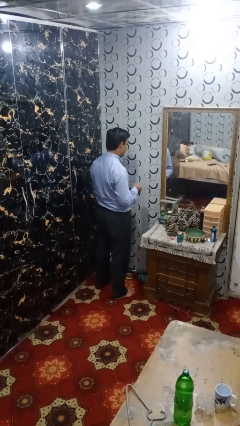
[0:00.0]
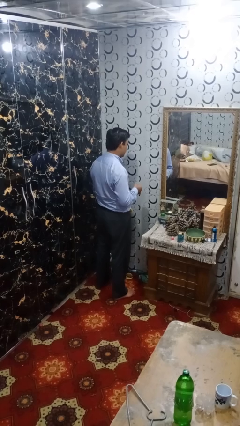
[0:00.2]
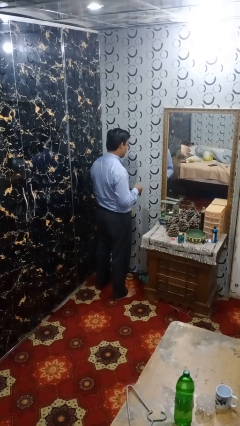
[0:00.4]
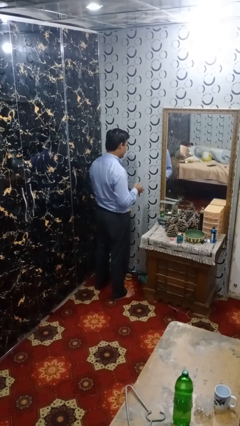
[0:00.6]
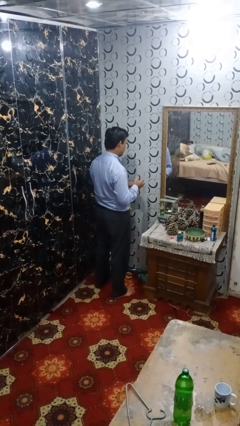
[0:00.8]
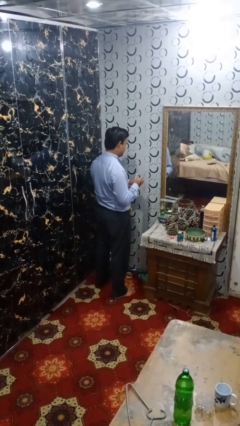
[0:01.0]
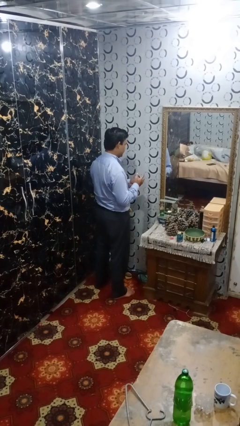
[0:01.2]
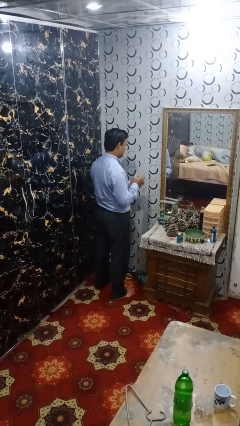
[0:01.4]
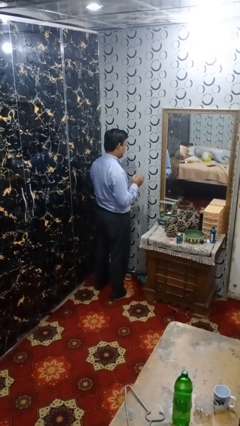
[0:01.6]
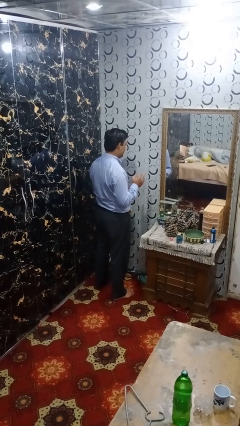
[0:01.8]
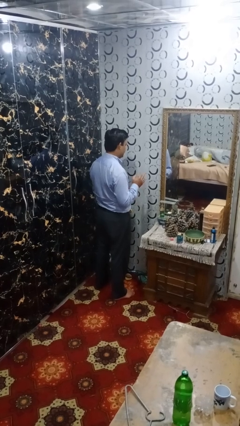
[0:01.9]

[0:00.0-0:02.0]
person puts on ring

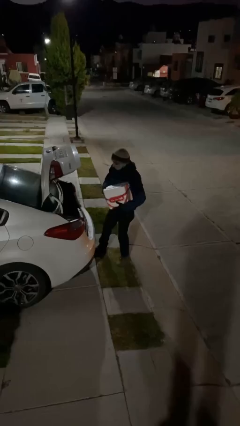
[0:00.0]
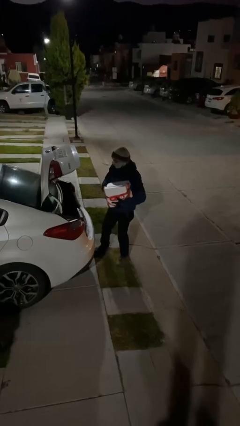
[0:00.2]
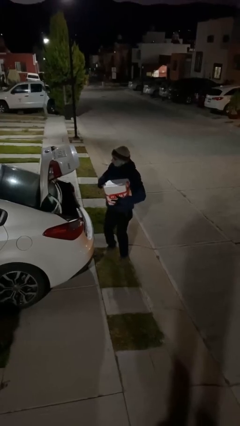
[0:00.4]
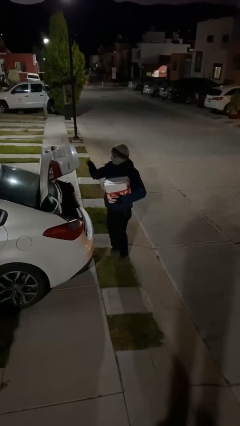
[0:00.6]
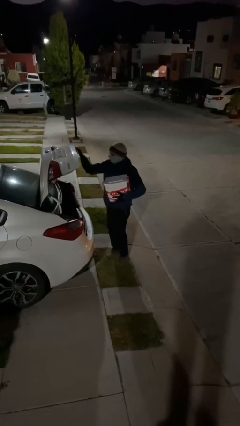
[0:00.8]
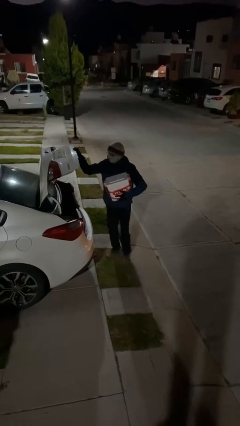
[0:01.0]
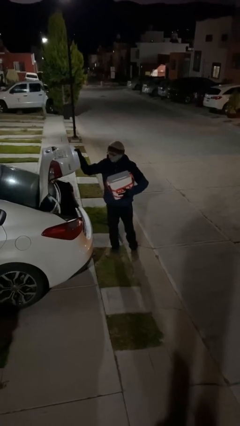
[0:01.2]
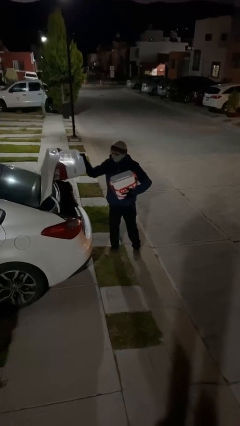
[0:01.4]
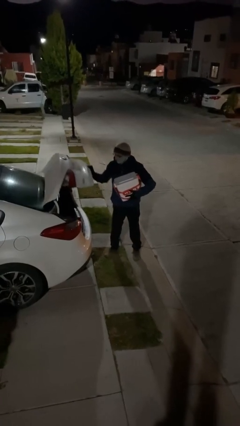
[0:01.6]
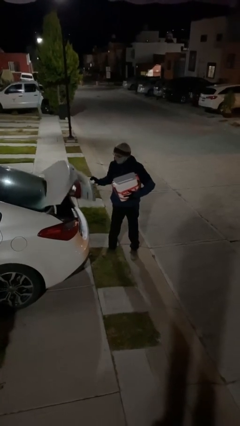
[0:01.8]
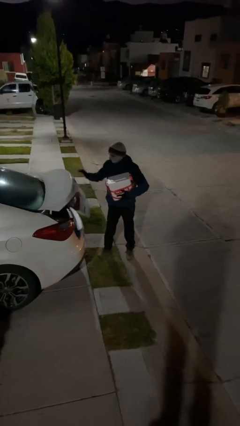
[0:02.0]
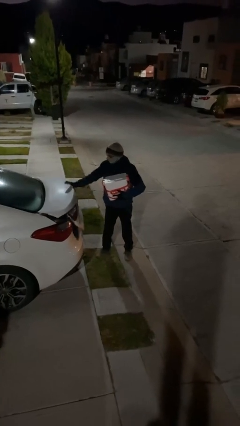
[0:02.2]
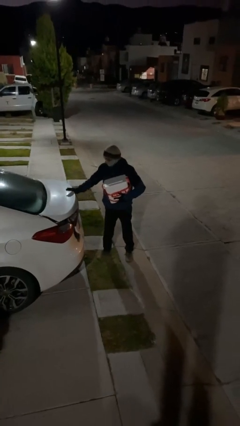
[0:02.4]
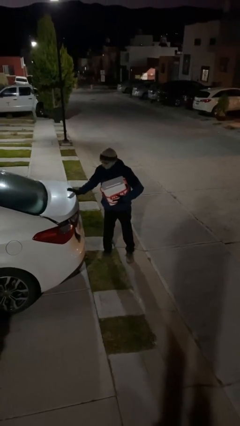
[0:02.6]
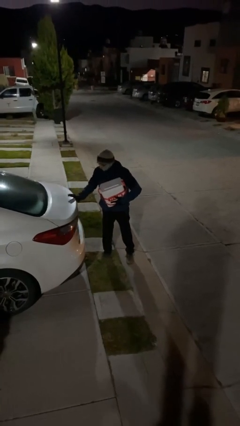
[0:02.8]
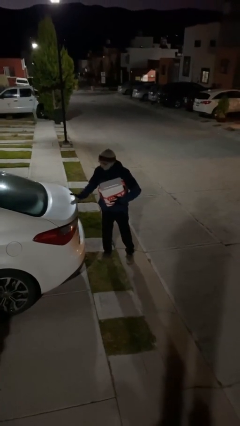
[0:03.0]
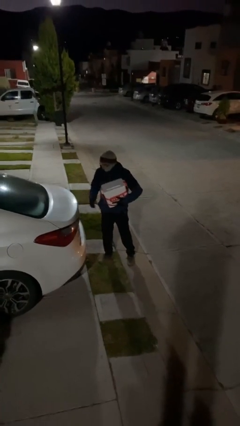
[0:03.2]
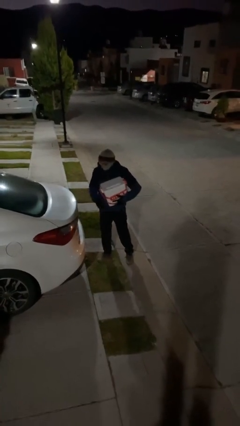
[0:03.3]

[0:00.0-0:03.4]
person closes car trunk

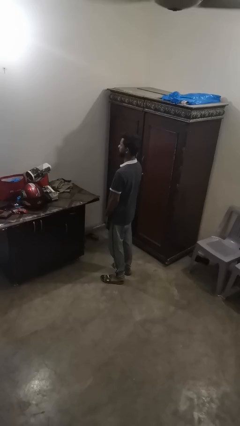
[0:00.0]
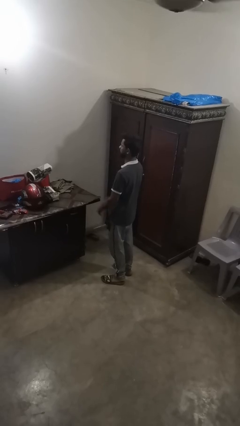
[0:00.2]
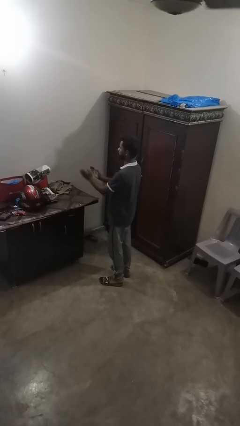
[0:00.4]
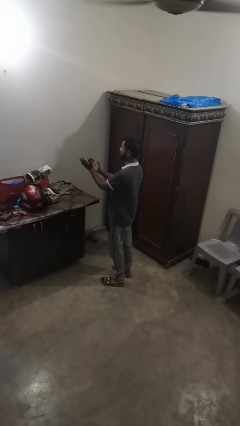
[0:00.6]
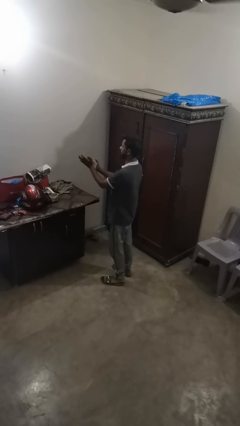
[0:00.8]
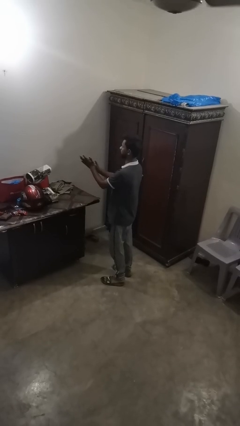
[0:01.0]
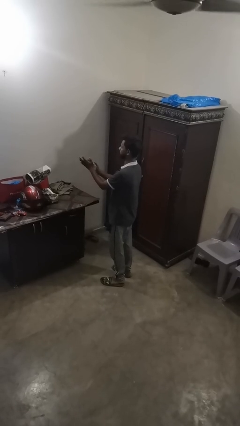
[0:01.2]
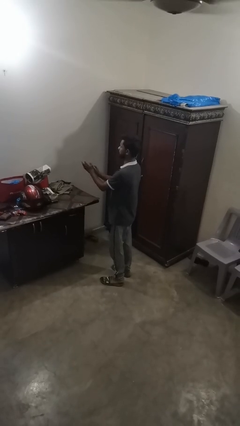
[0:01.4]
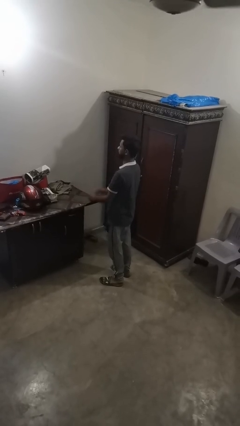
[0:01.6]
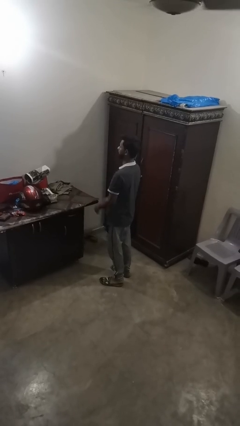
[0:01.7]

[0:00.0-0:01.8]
person claps hands

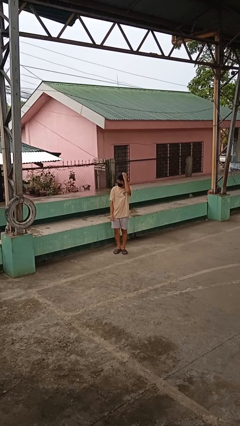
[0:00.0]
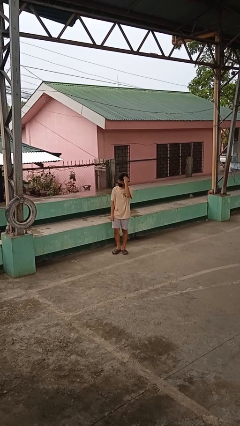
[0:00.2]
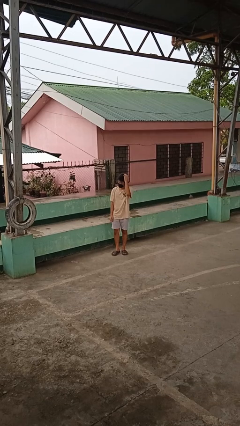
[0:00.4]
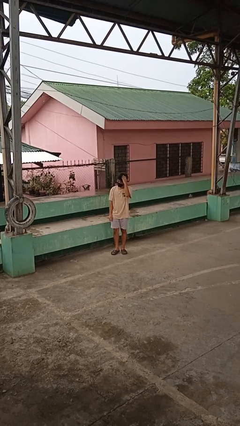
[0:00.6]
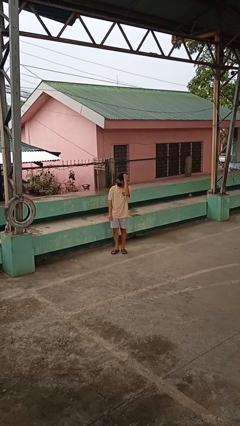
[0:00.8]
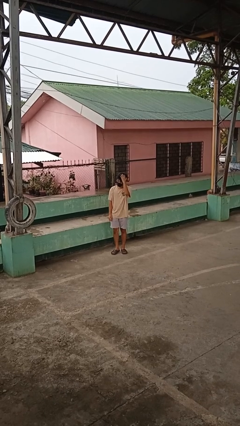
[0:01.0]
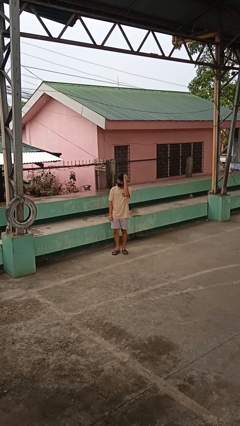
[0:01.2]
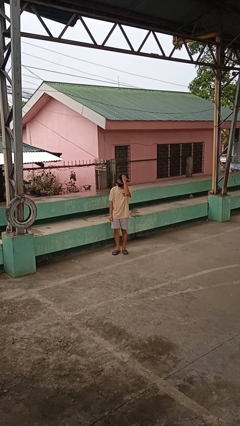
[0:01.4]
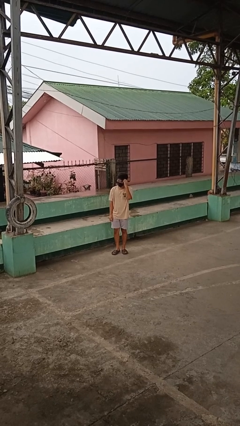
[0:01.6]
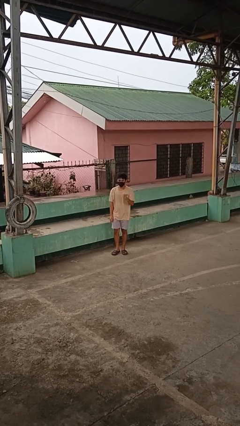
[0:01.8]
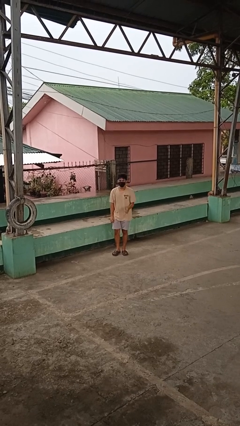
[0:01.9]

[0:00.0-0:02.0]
person pats head

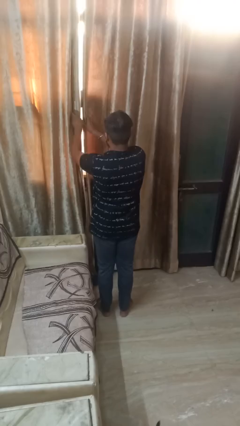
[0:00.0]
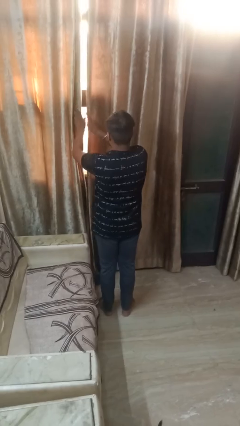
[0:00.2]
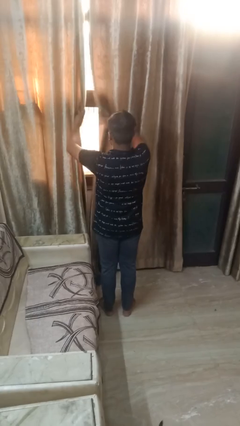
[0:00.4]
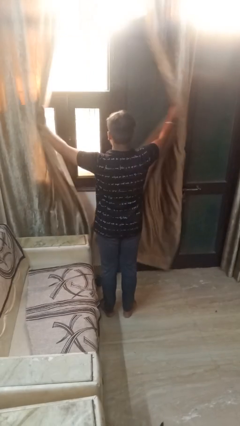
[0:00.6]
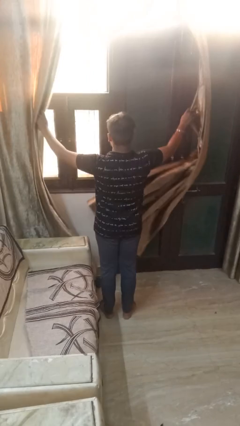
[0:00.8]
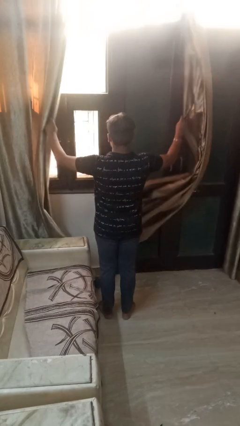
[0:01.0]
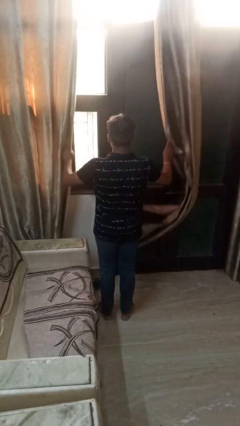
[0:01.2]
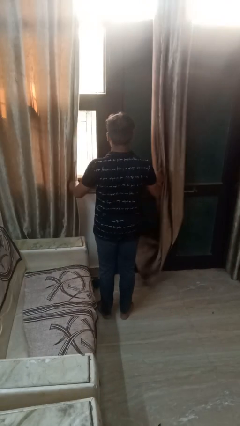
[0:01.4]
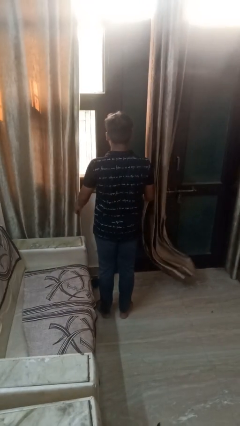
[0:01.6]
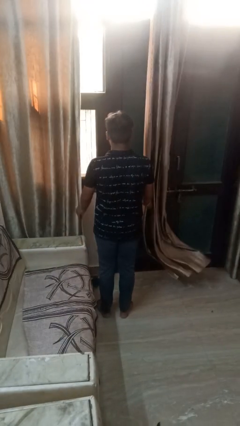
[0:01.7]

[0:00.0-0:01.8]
person opens curtains

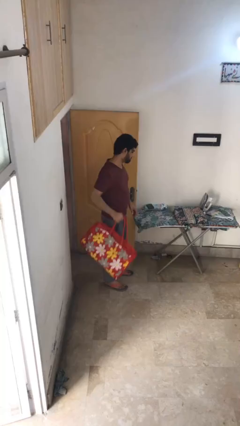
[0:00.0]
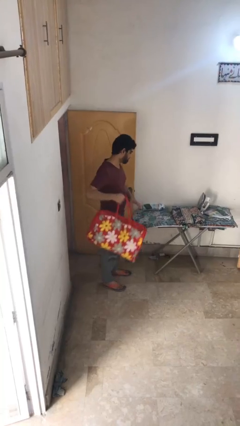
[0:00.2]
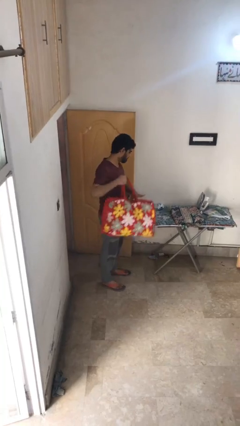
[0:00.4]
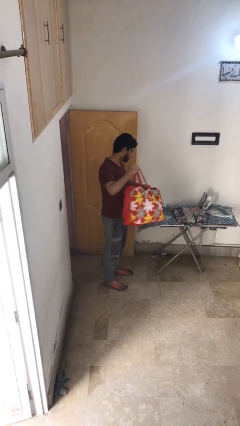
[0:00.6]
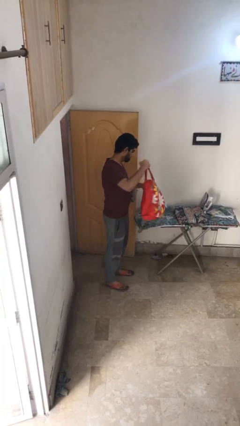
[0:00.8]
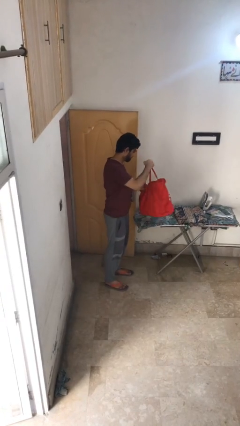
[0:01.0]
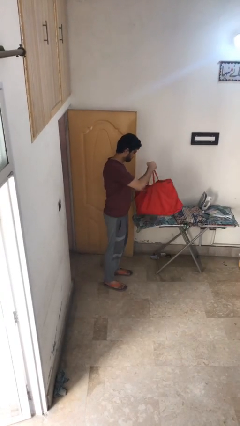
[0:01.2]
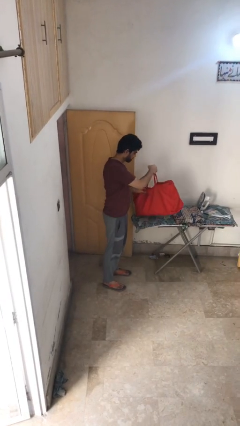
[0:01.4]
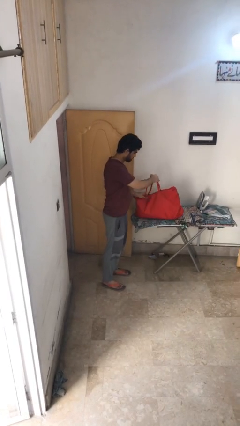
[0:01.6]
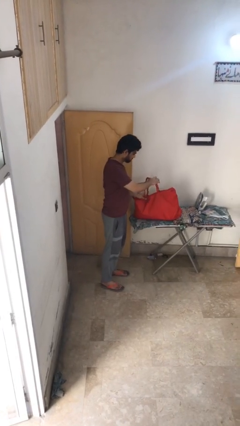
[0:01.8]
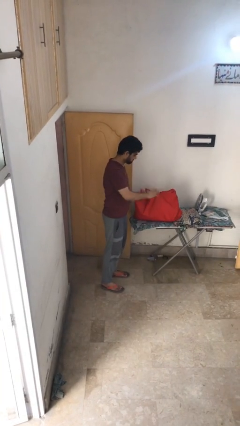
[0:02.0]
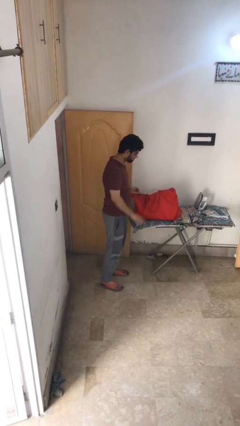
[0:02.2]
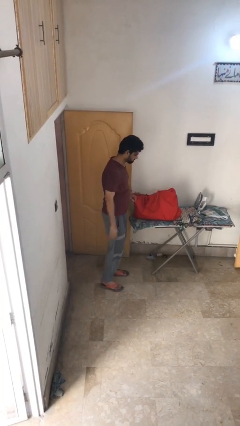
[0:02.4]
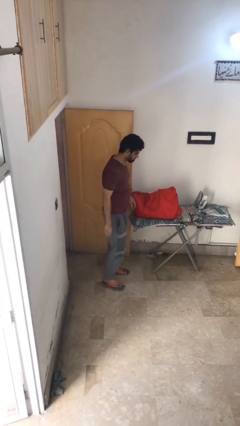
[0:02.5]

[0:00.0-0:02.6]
person puts down object on table

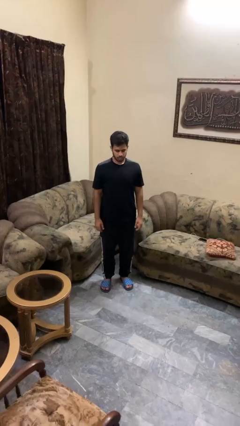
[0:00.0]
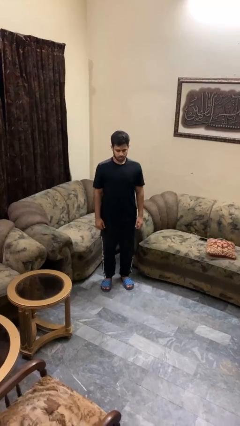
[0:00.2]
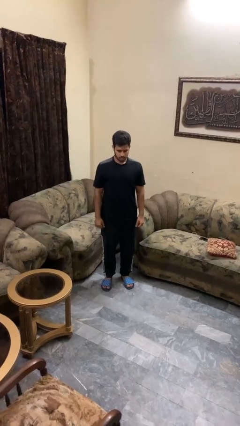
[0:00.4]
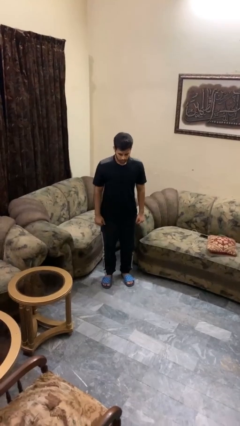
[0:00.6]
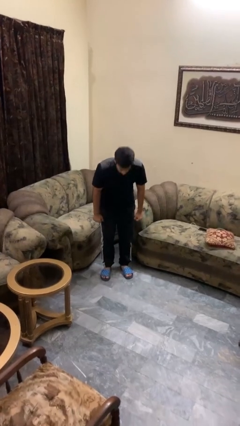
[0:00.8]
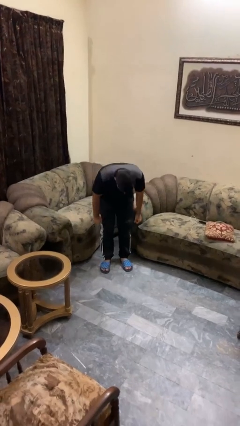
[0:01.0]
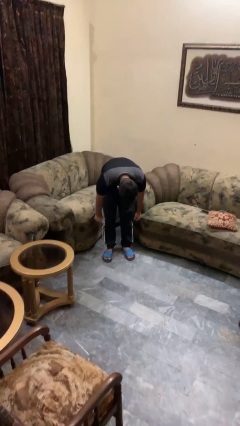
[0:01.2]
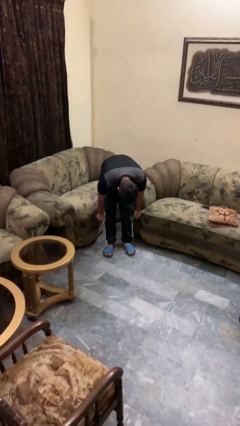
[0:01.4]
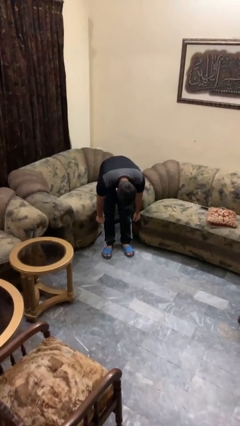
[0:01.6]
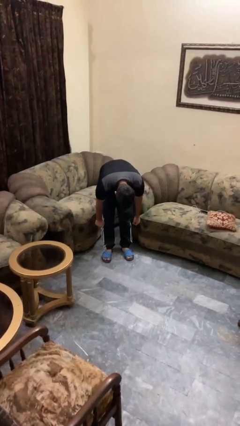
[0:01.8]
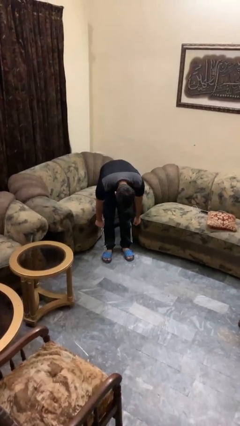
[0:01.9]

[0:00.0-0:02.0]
person bows

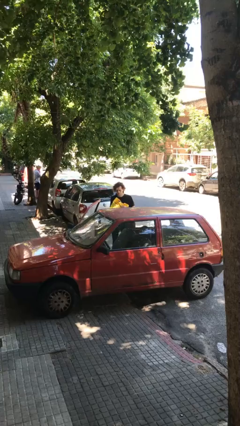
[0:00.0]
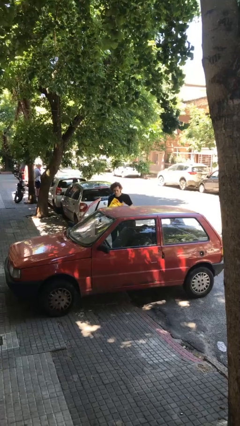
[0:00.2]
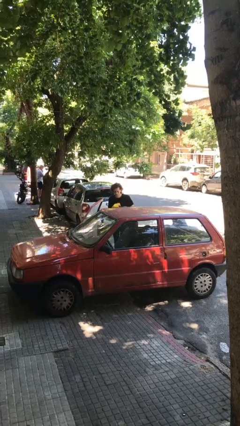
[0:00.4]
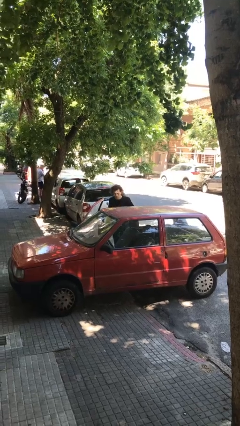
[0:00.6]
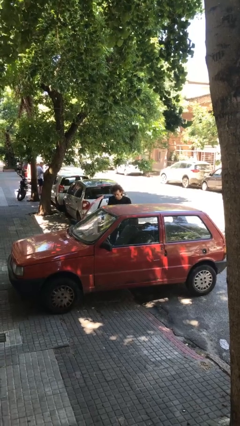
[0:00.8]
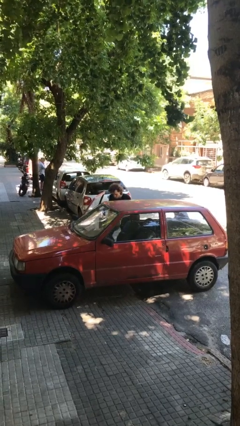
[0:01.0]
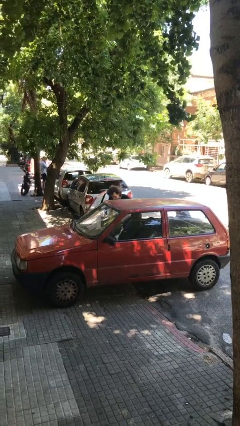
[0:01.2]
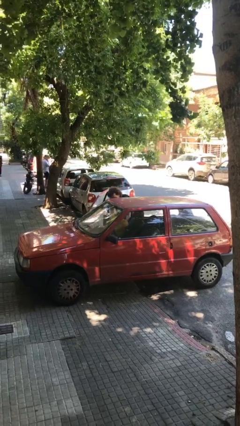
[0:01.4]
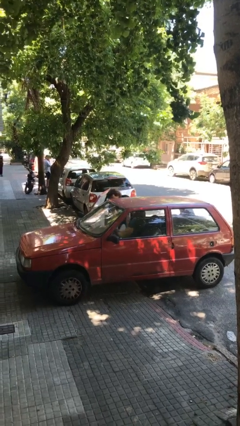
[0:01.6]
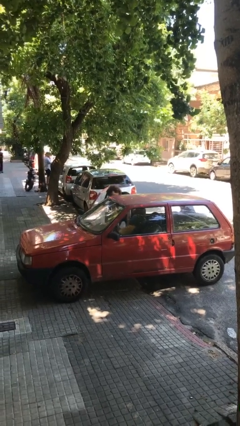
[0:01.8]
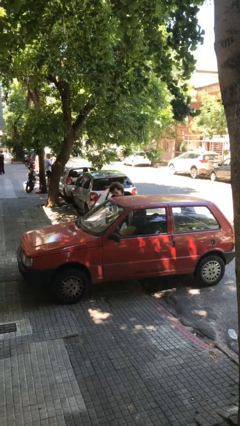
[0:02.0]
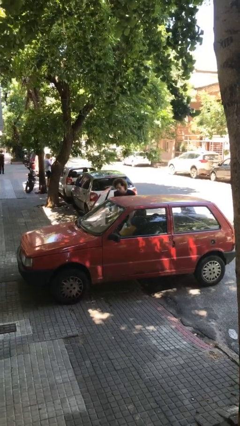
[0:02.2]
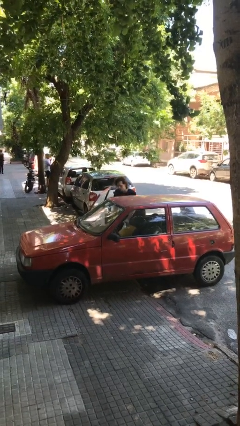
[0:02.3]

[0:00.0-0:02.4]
person loads car
